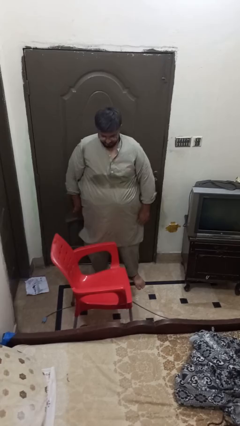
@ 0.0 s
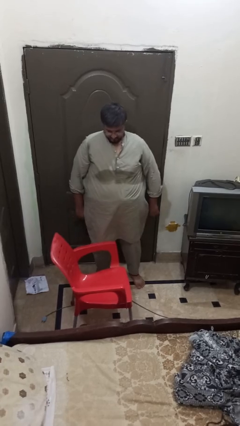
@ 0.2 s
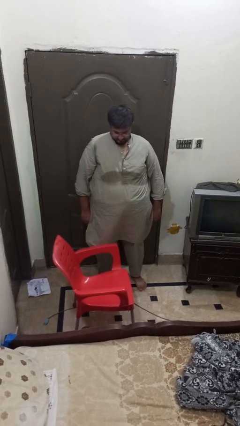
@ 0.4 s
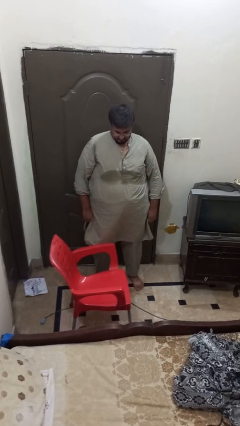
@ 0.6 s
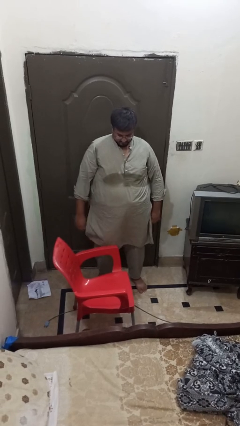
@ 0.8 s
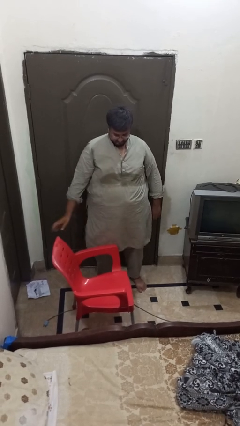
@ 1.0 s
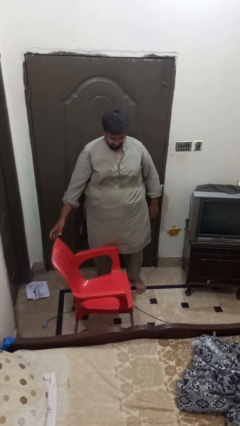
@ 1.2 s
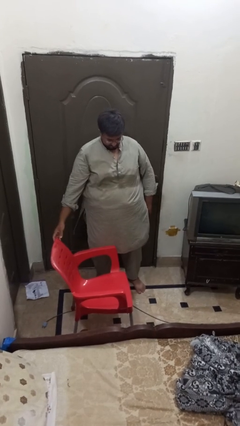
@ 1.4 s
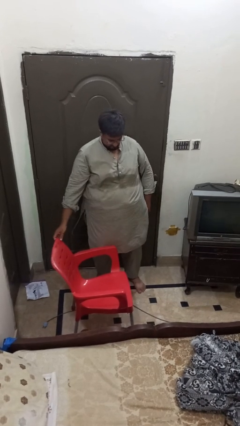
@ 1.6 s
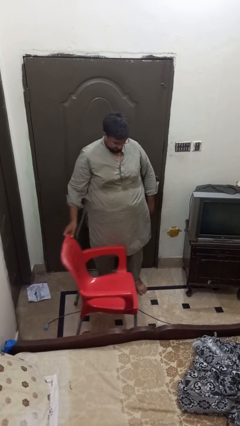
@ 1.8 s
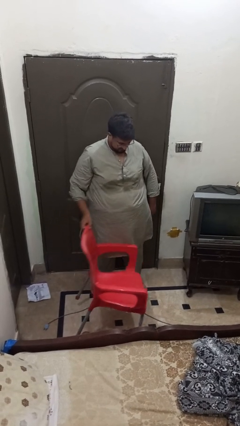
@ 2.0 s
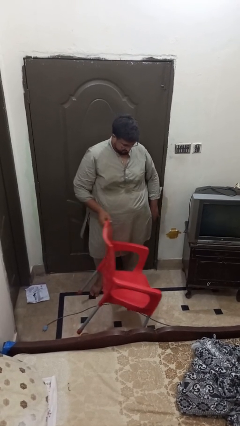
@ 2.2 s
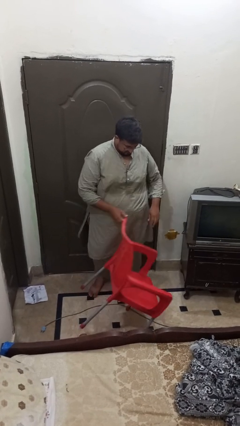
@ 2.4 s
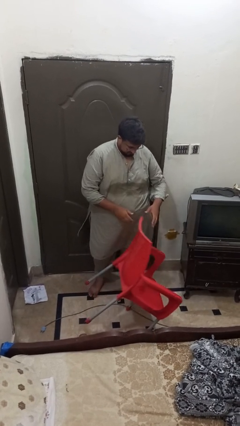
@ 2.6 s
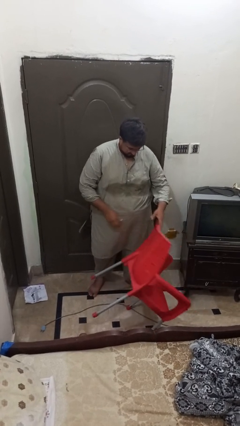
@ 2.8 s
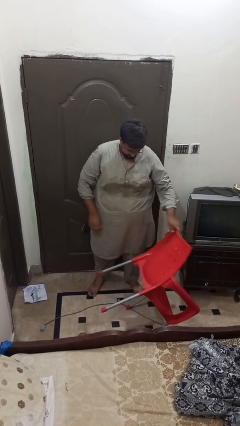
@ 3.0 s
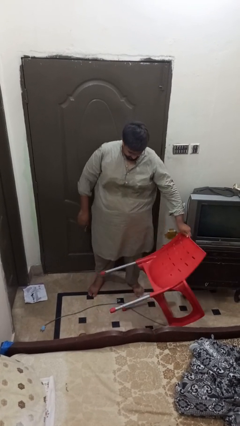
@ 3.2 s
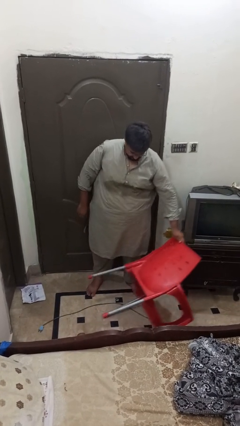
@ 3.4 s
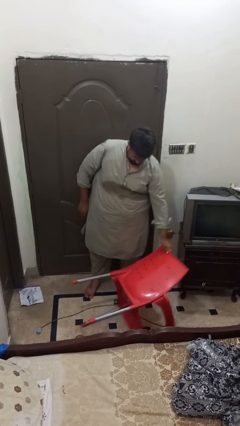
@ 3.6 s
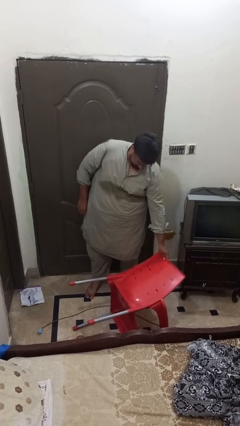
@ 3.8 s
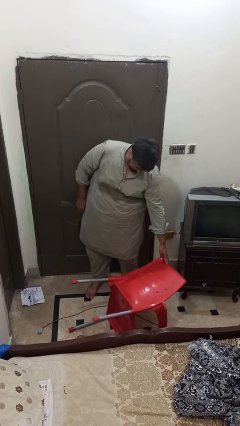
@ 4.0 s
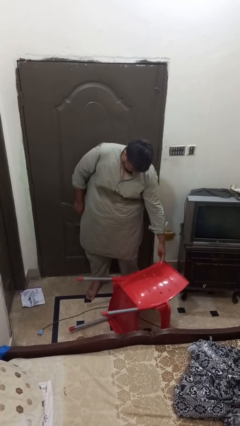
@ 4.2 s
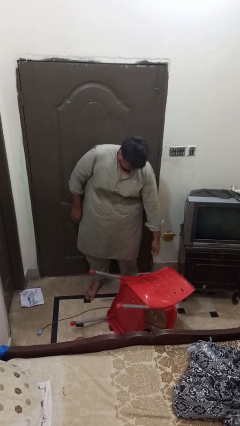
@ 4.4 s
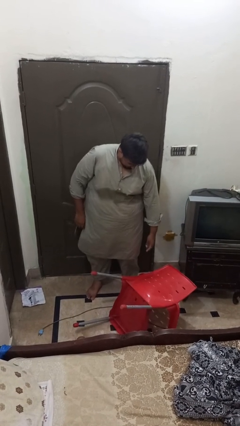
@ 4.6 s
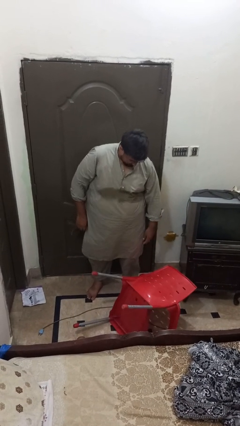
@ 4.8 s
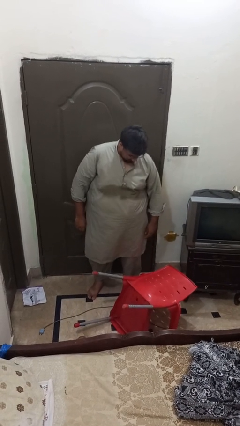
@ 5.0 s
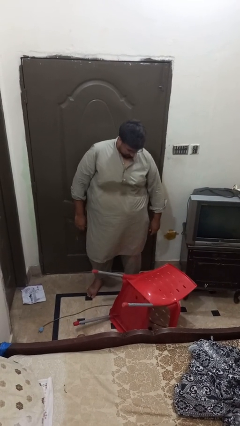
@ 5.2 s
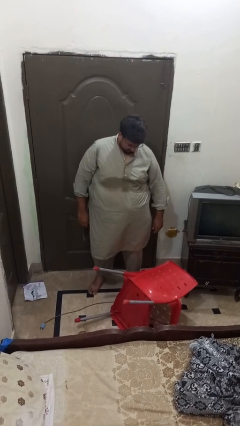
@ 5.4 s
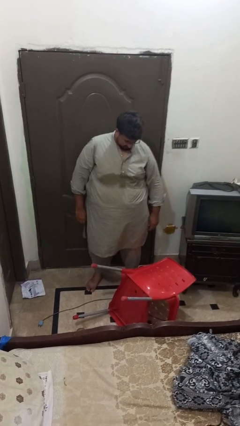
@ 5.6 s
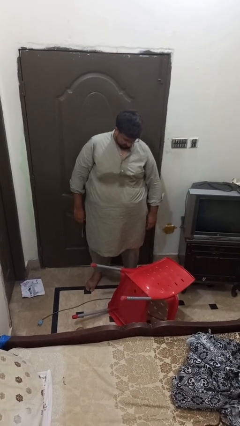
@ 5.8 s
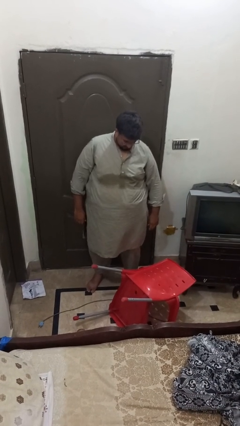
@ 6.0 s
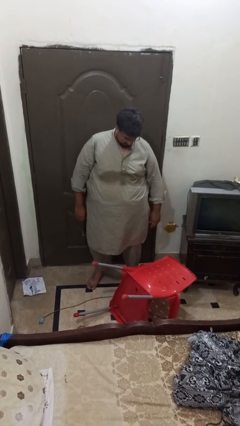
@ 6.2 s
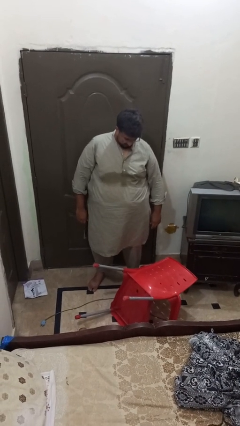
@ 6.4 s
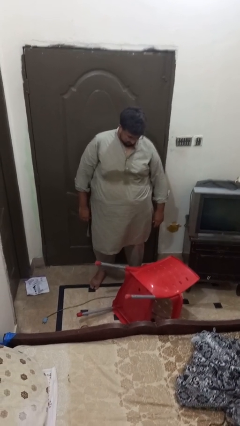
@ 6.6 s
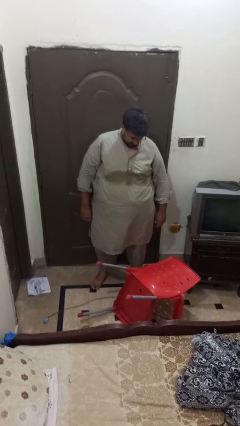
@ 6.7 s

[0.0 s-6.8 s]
person knocks over furniture

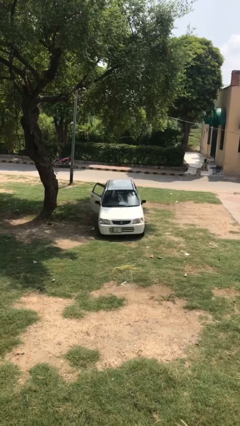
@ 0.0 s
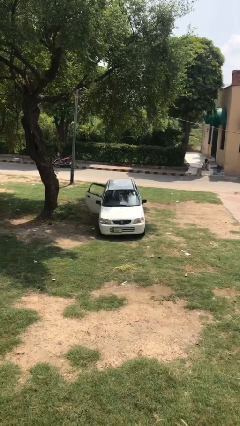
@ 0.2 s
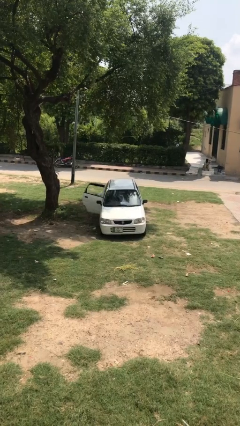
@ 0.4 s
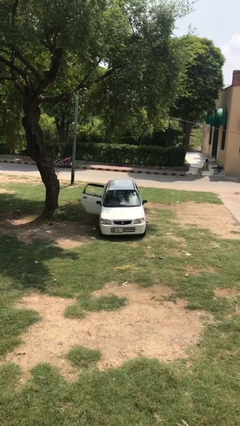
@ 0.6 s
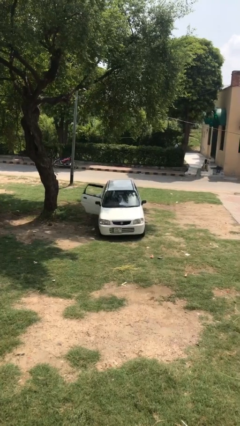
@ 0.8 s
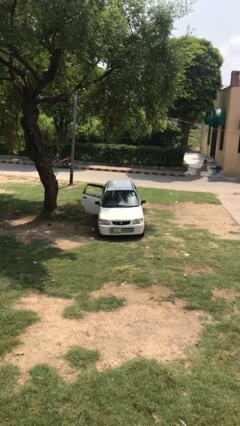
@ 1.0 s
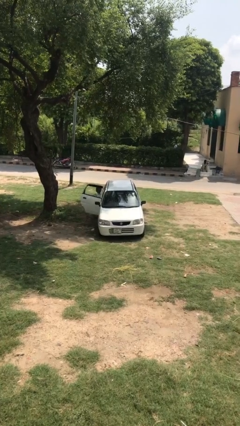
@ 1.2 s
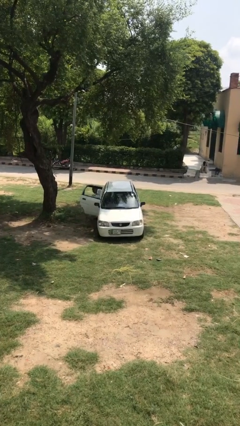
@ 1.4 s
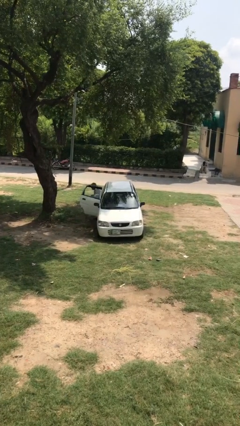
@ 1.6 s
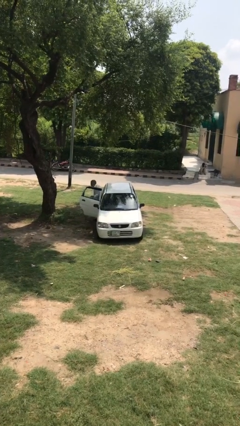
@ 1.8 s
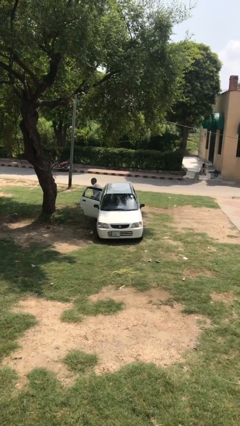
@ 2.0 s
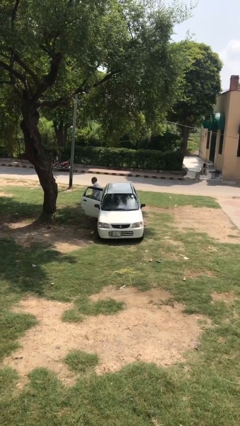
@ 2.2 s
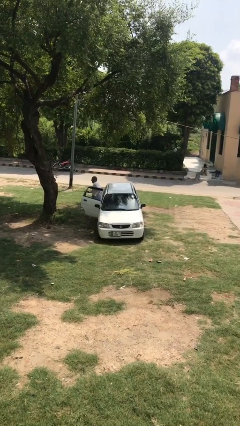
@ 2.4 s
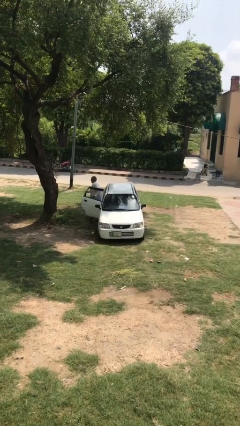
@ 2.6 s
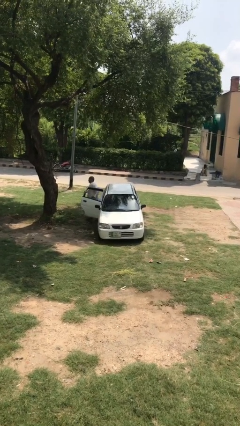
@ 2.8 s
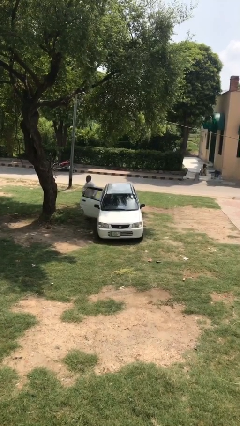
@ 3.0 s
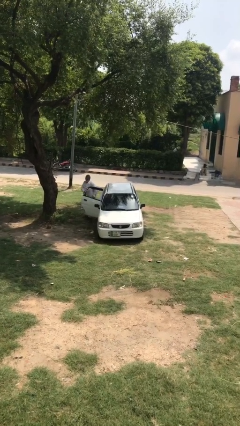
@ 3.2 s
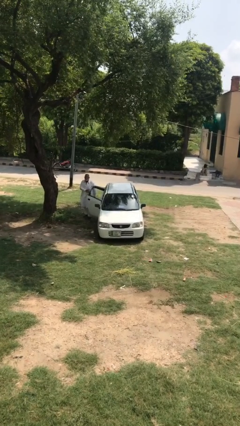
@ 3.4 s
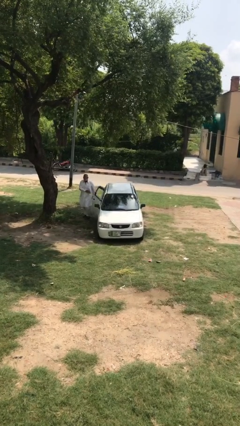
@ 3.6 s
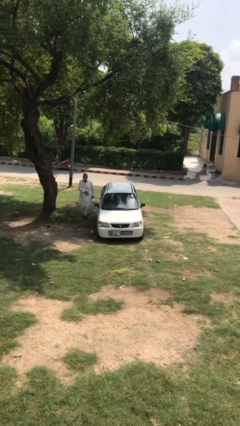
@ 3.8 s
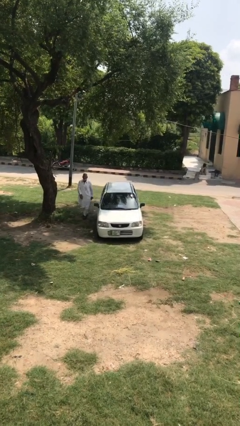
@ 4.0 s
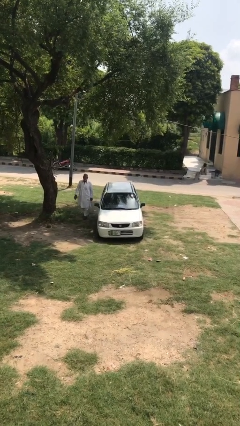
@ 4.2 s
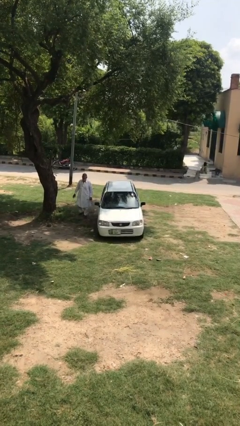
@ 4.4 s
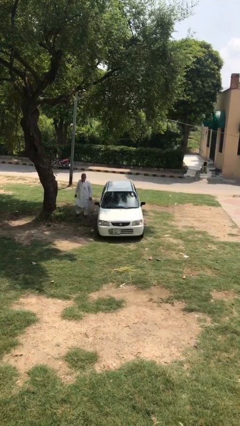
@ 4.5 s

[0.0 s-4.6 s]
car drops off person

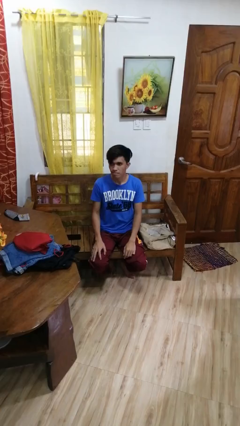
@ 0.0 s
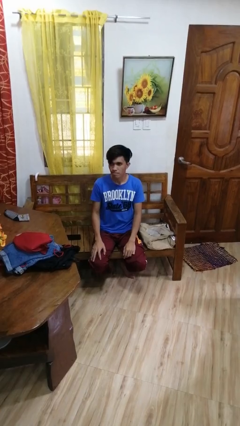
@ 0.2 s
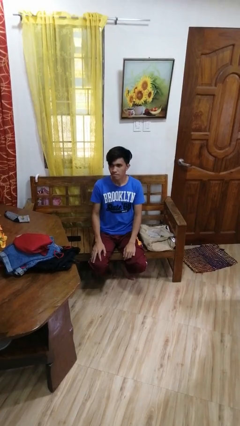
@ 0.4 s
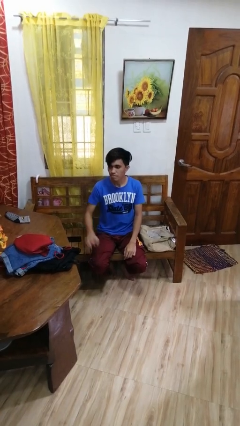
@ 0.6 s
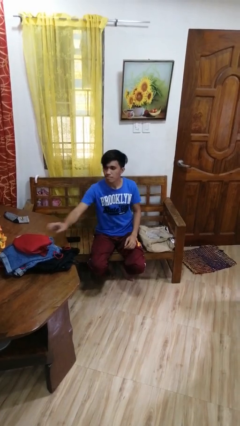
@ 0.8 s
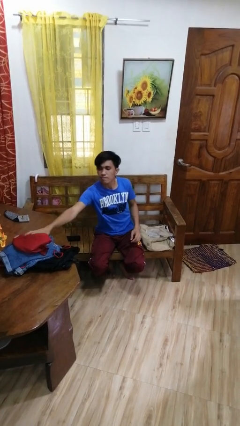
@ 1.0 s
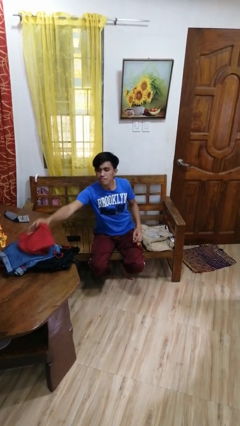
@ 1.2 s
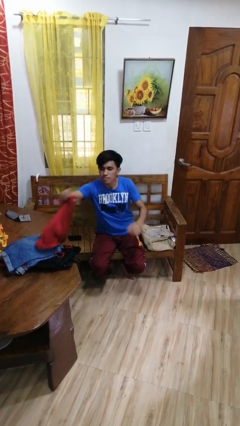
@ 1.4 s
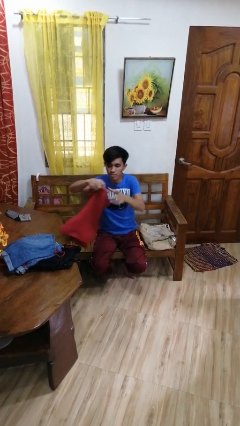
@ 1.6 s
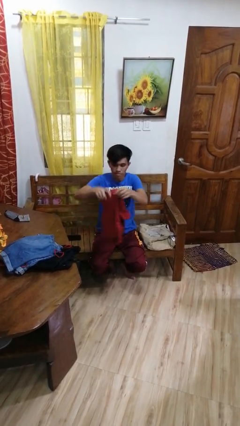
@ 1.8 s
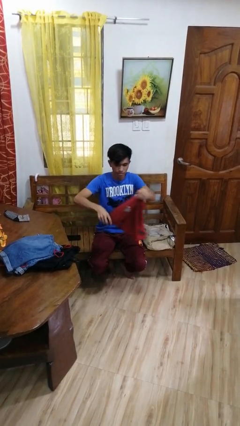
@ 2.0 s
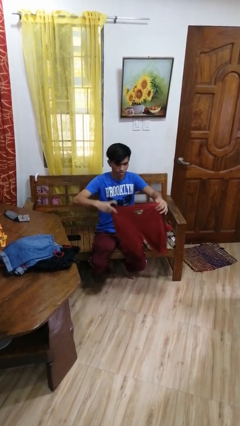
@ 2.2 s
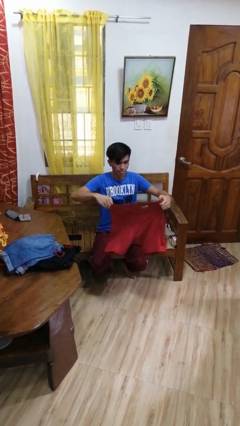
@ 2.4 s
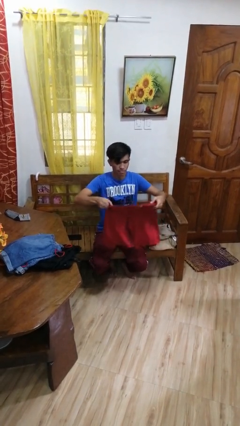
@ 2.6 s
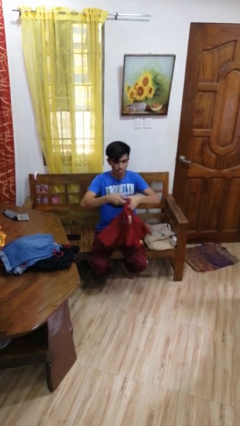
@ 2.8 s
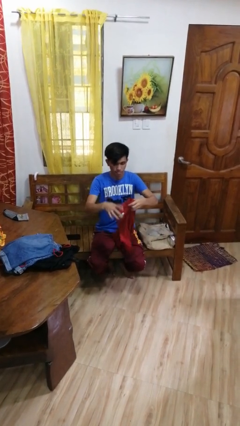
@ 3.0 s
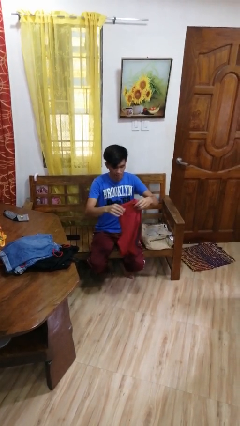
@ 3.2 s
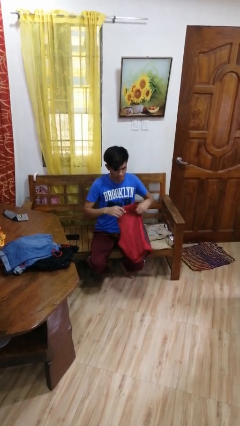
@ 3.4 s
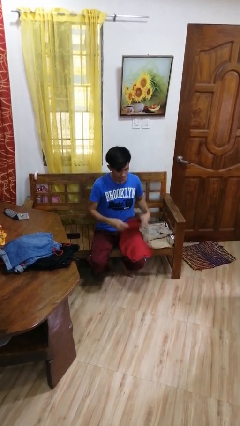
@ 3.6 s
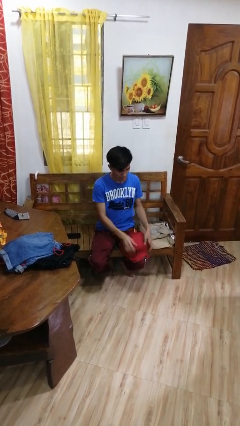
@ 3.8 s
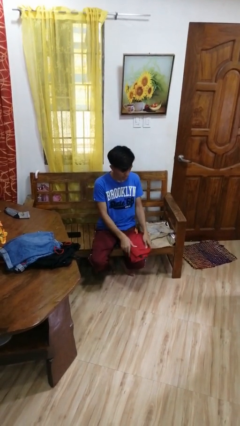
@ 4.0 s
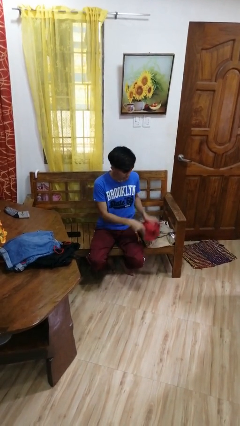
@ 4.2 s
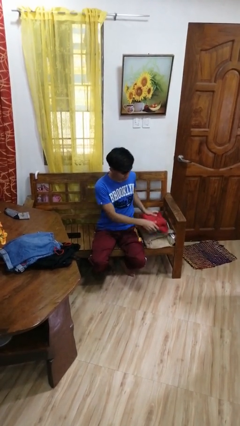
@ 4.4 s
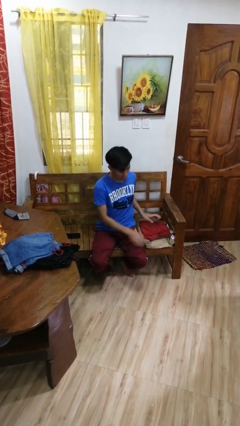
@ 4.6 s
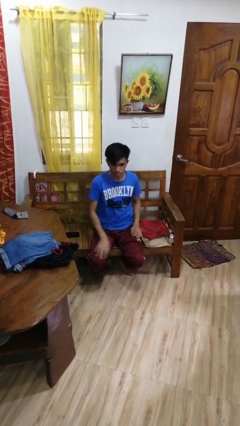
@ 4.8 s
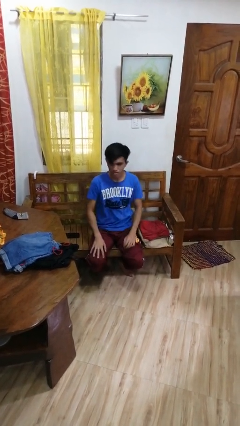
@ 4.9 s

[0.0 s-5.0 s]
person folds pants

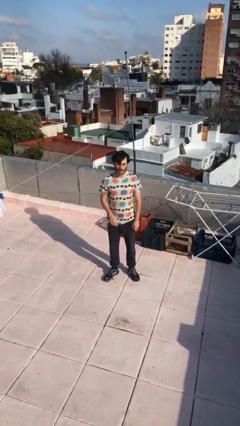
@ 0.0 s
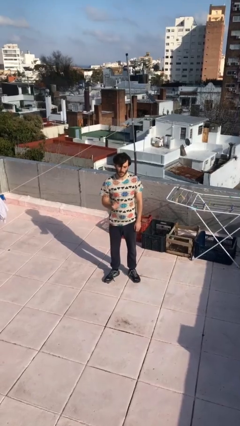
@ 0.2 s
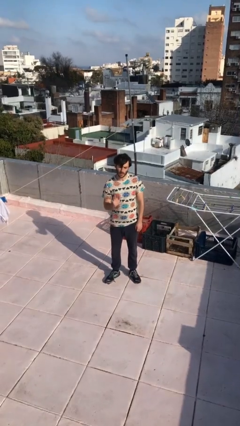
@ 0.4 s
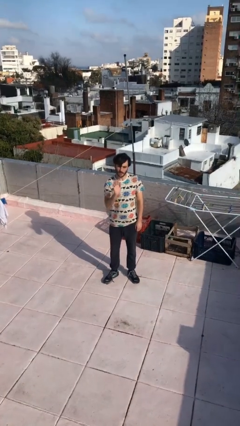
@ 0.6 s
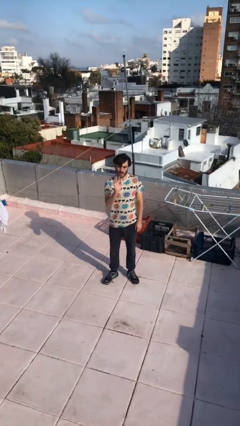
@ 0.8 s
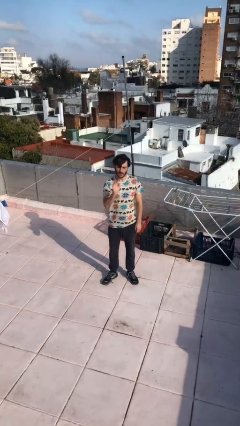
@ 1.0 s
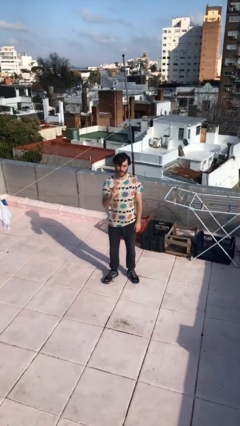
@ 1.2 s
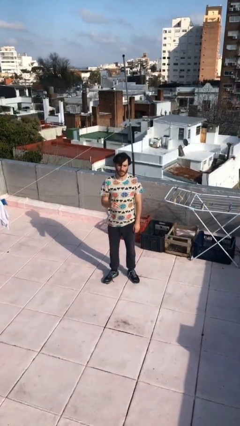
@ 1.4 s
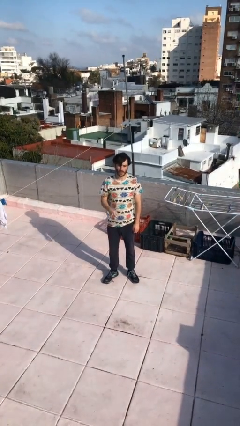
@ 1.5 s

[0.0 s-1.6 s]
person gestures swipe up
